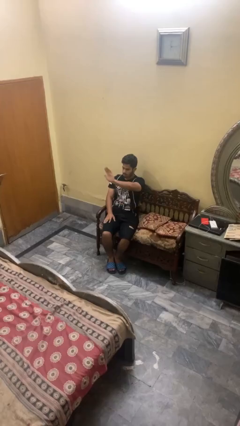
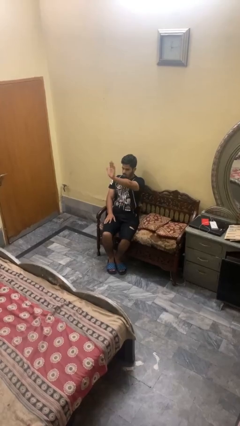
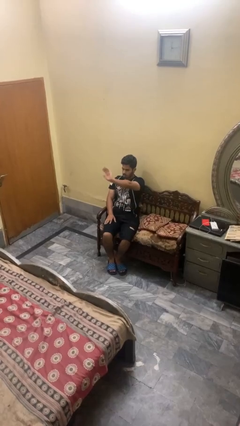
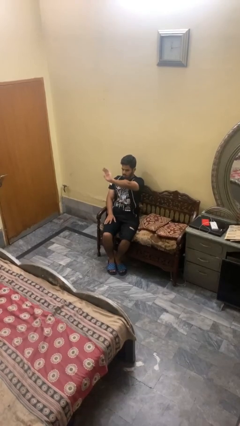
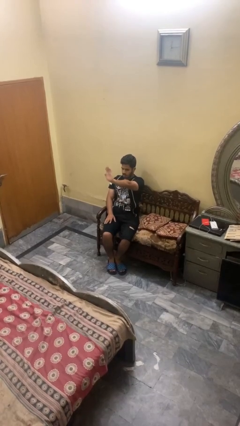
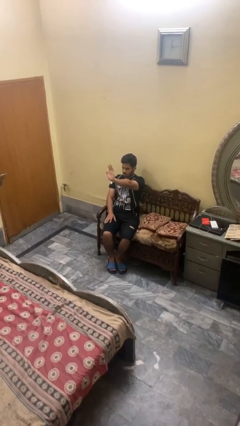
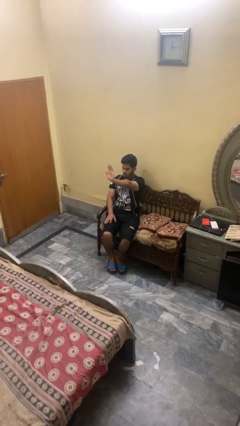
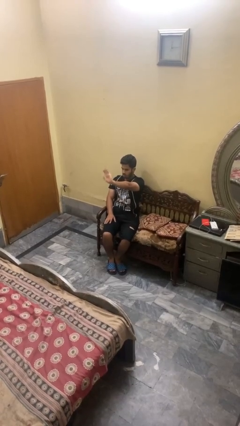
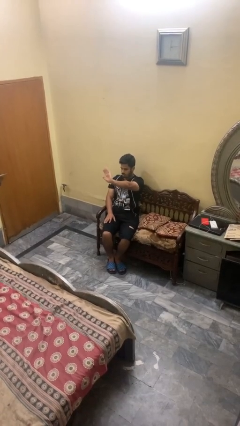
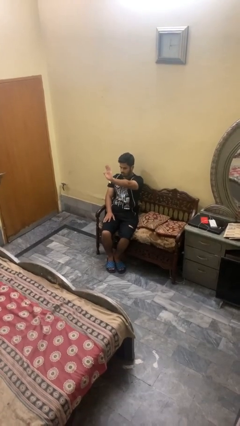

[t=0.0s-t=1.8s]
person waves at person

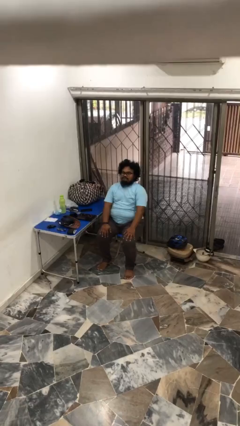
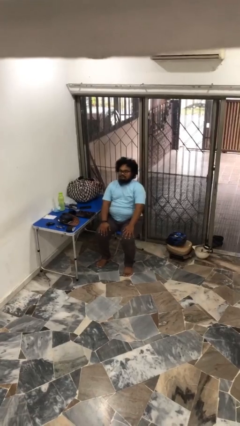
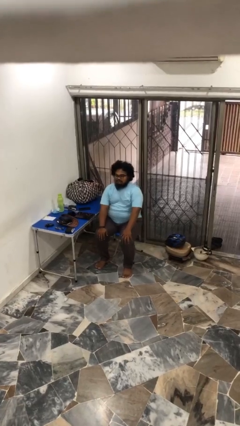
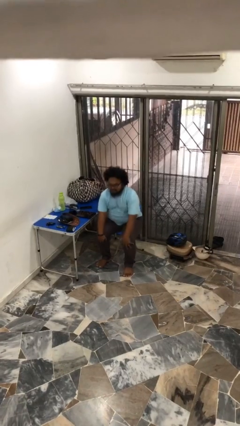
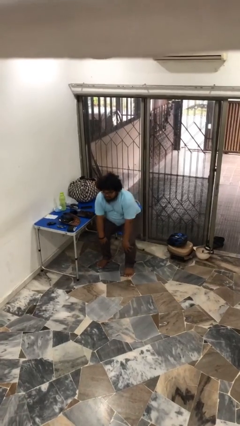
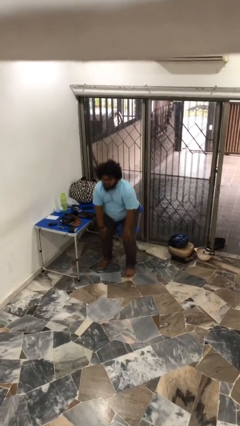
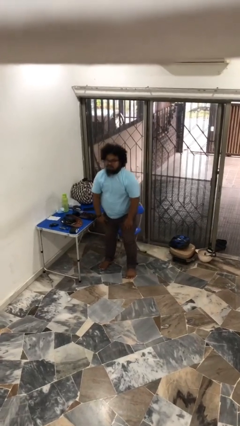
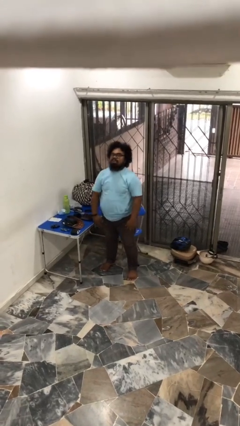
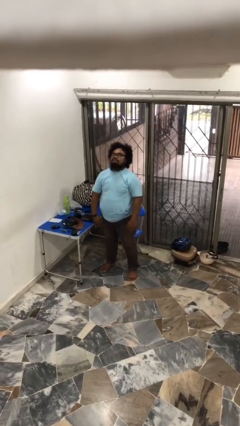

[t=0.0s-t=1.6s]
person stands up

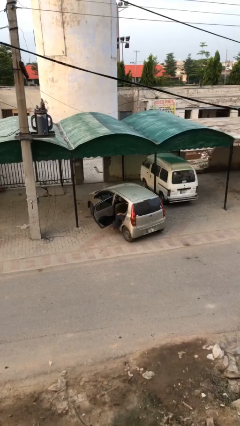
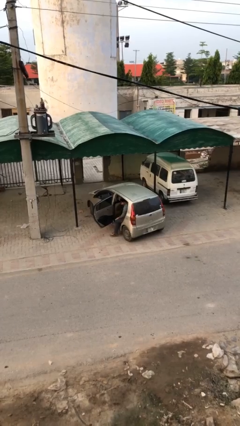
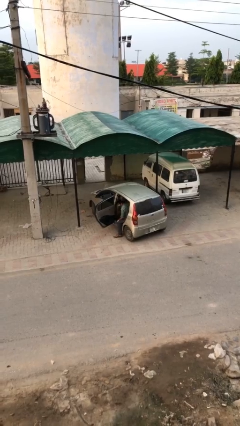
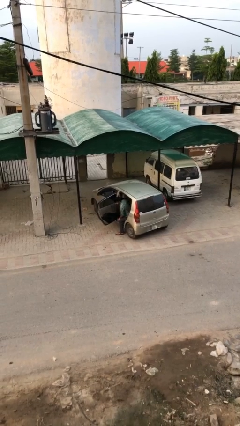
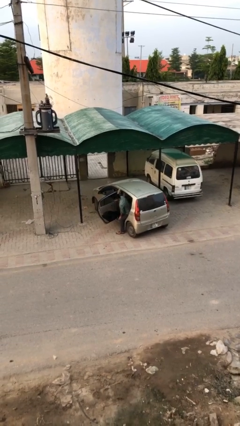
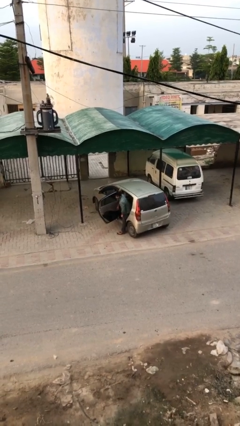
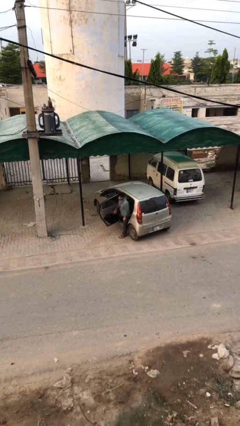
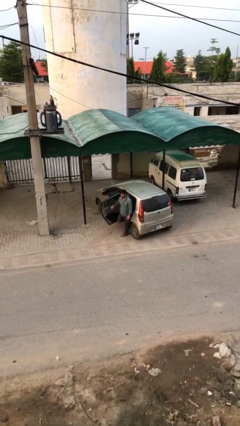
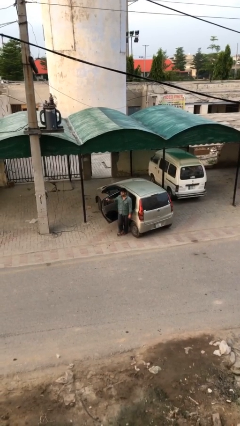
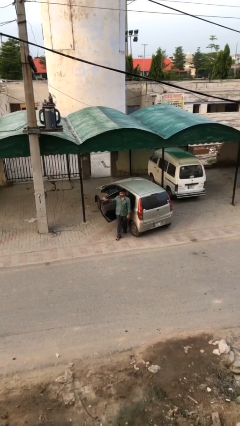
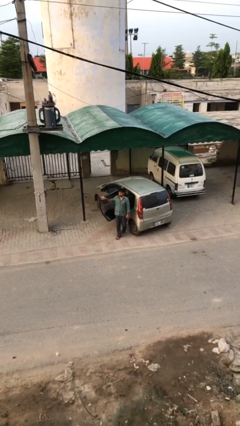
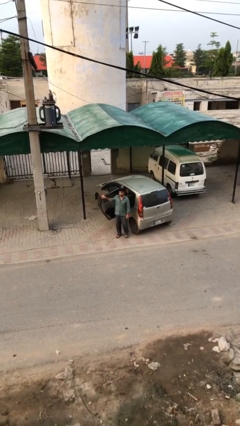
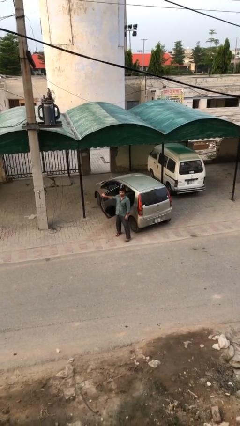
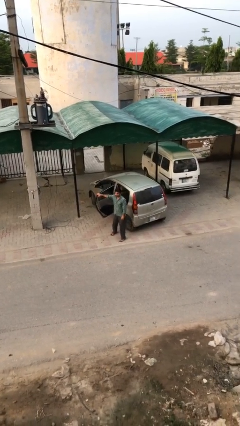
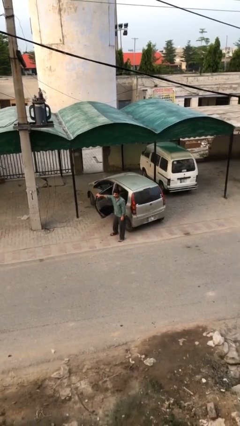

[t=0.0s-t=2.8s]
person exits car

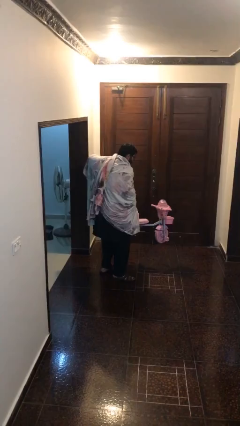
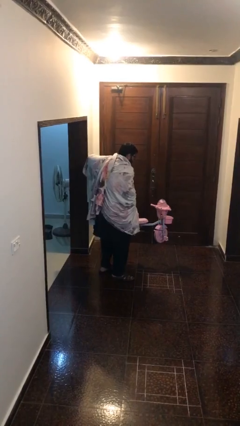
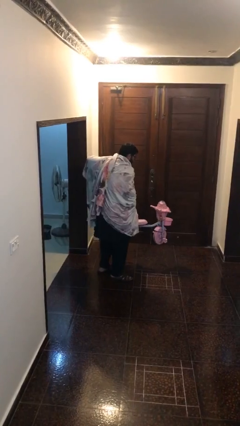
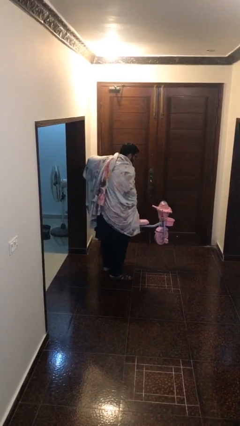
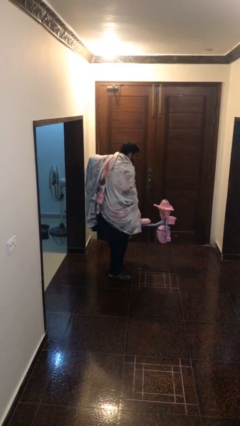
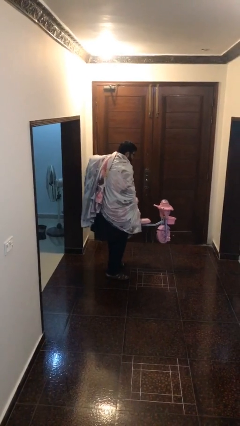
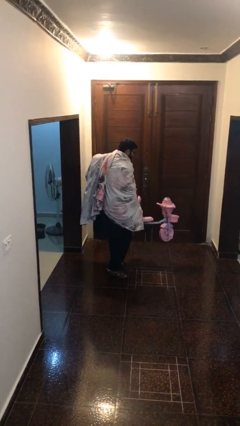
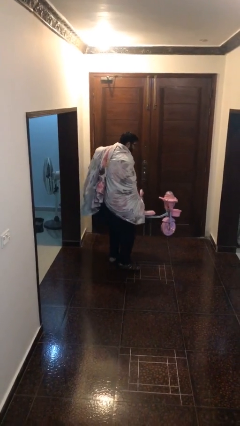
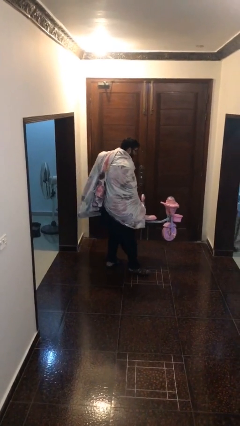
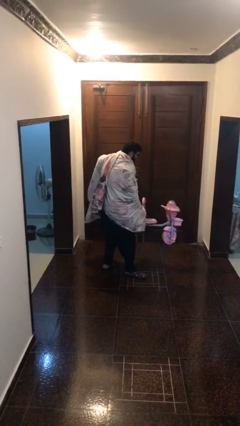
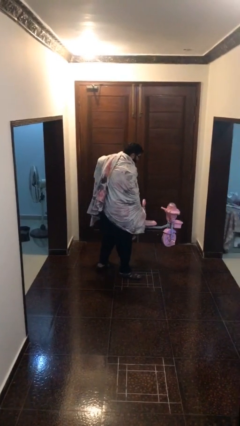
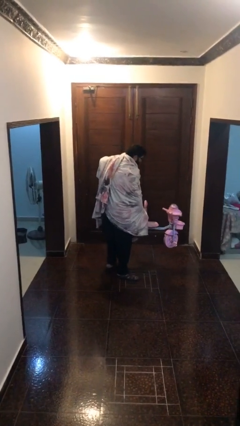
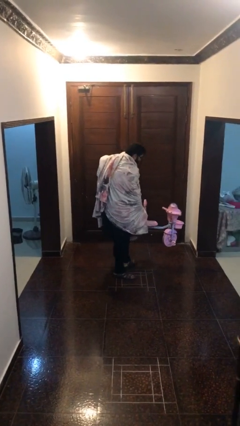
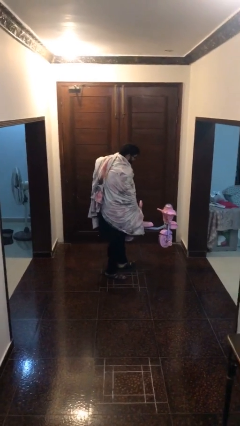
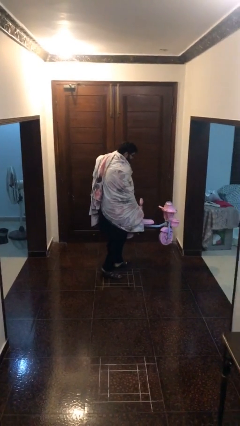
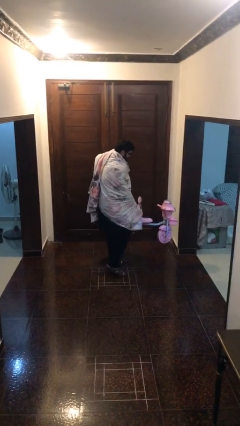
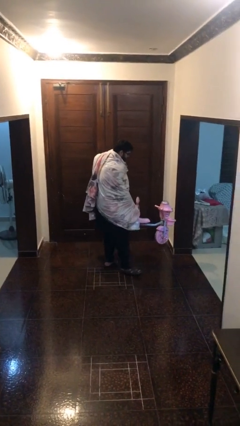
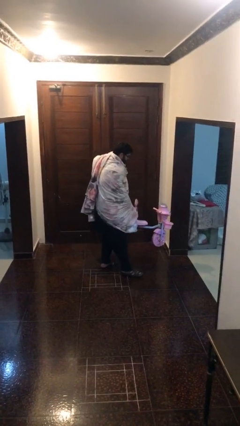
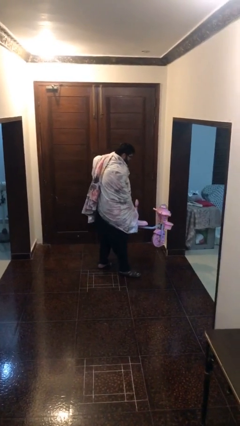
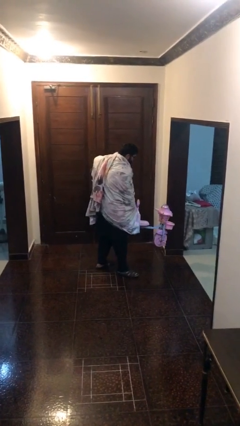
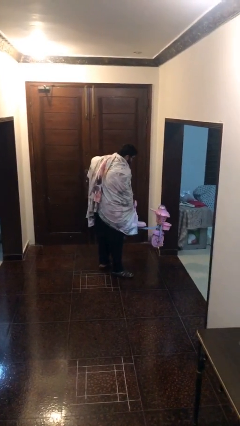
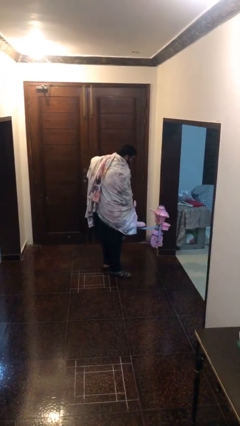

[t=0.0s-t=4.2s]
person carries heavy object

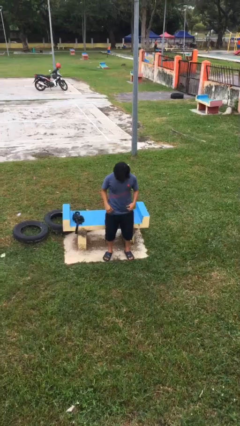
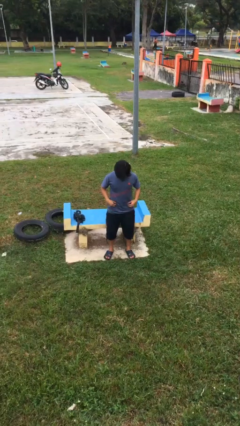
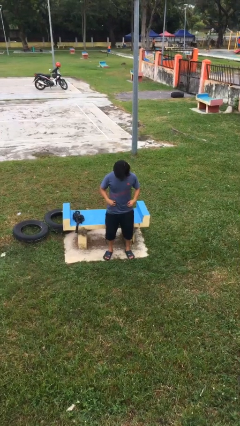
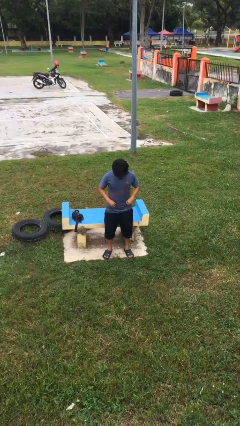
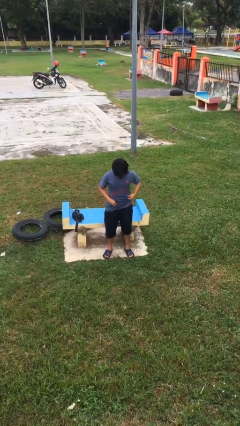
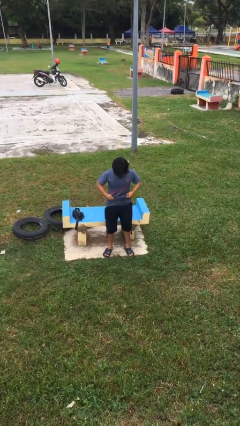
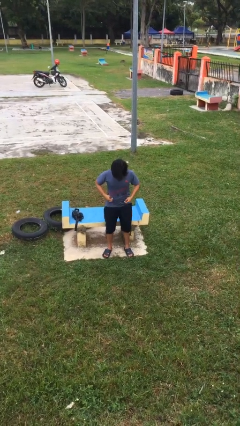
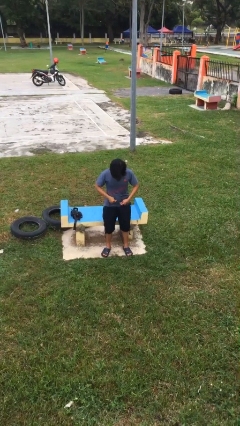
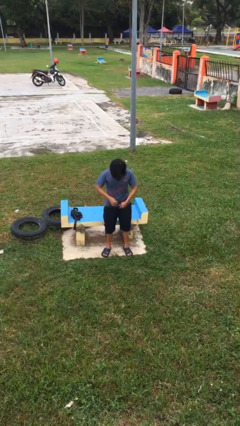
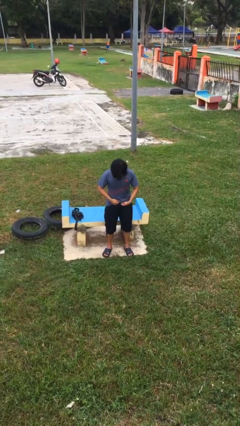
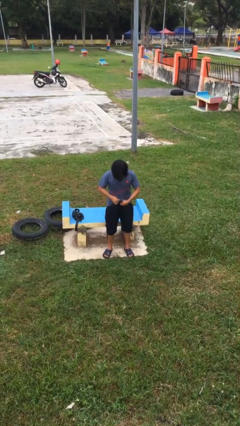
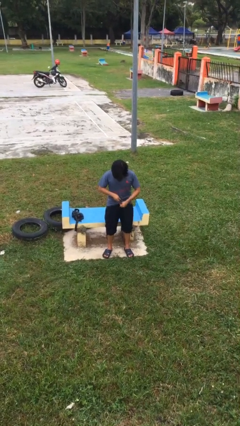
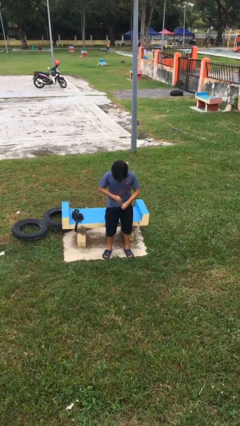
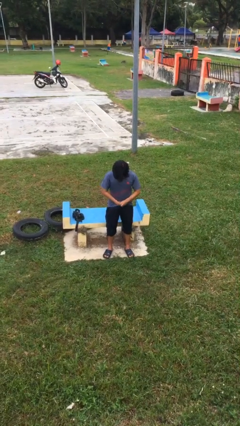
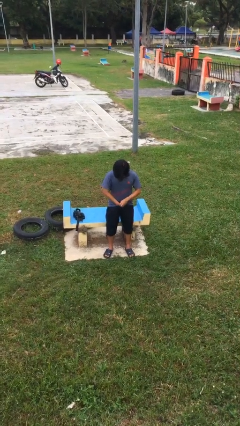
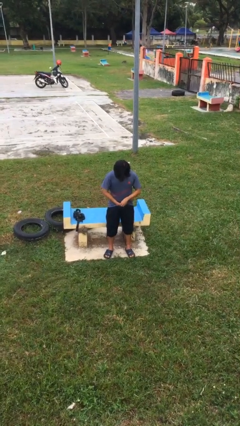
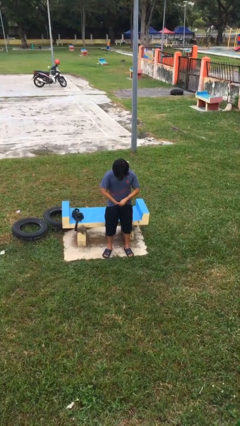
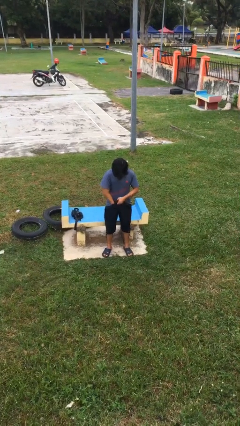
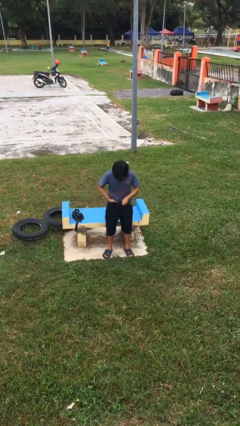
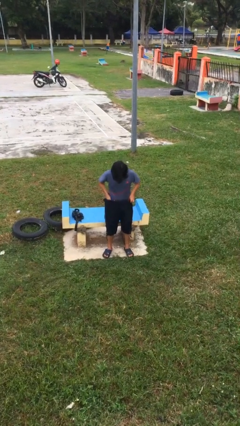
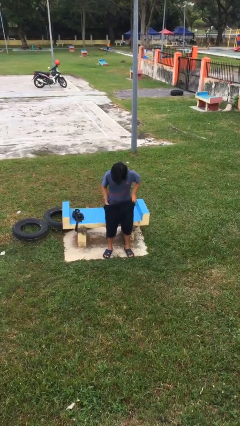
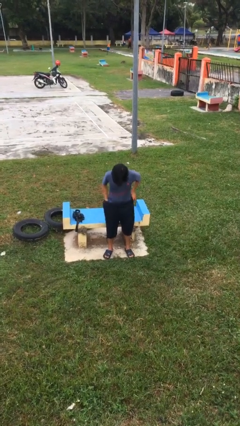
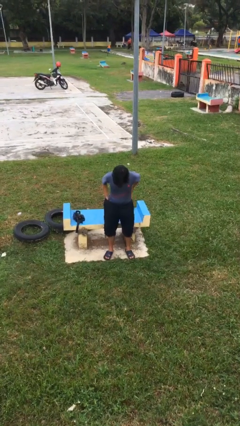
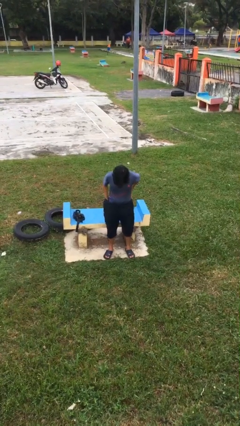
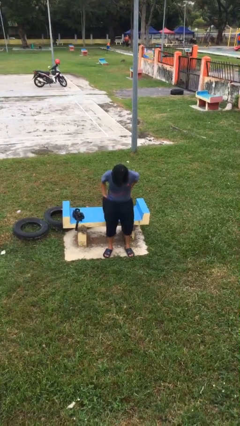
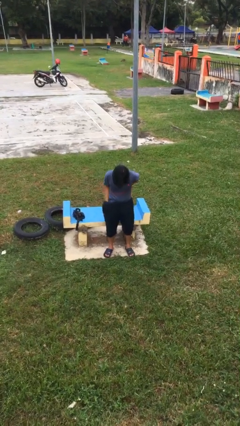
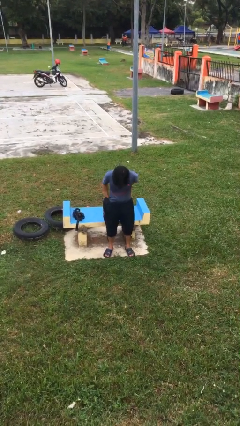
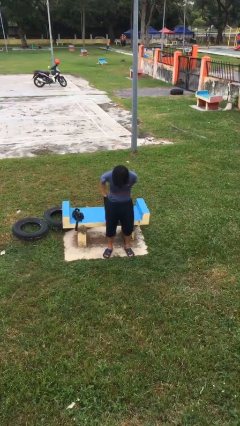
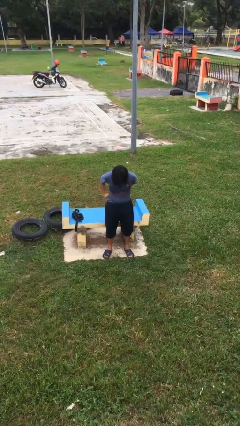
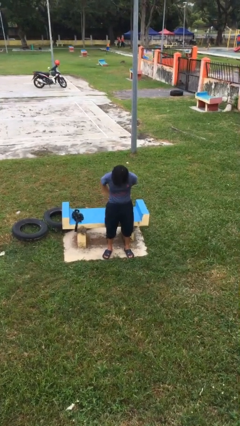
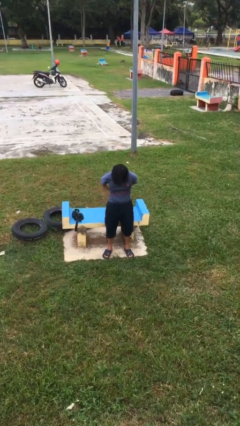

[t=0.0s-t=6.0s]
person tucks in shirt

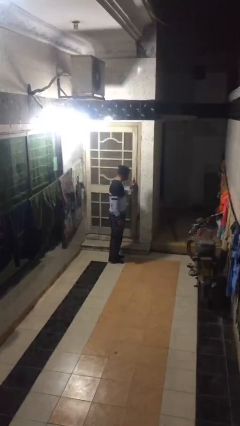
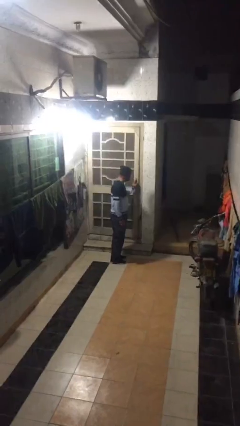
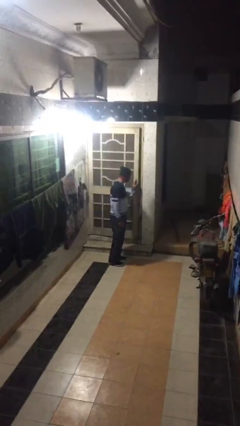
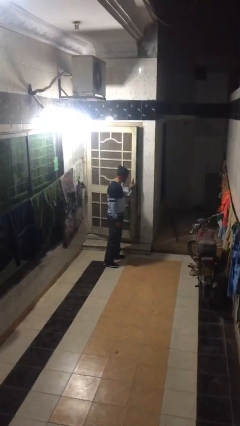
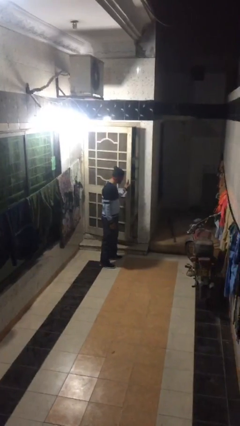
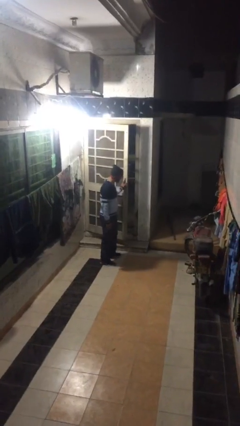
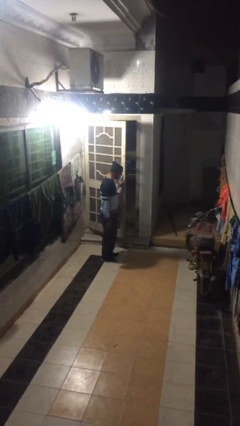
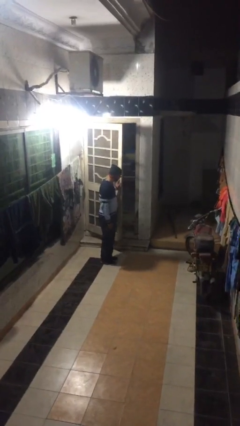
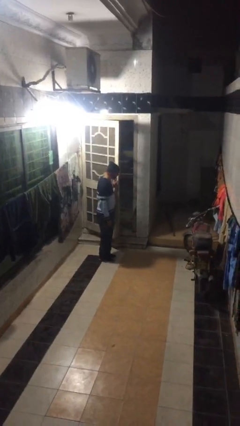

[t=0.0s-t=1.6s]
person opens facility door
